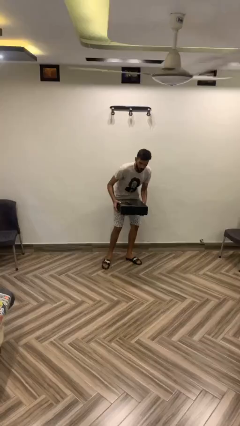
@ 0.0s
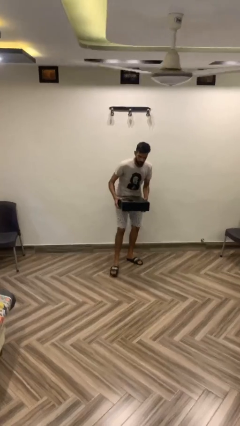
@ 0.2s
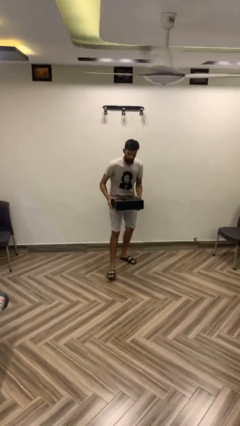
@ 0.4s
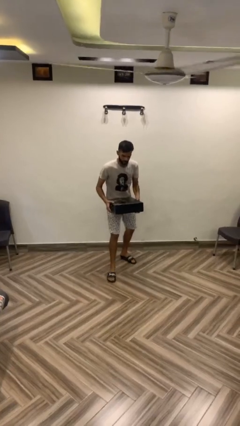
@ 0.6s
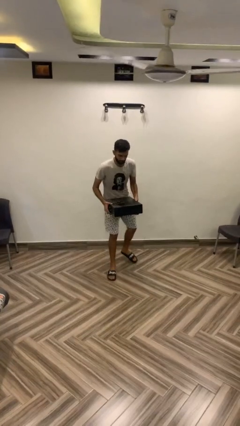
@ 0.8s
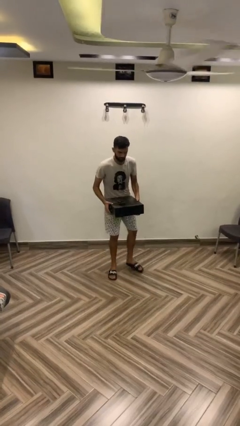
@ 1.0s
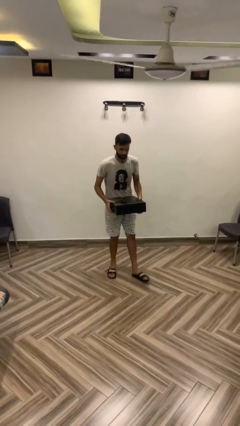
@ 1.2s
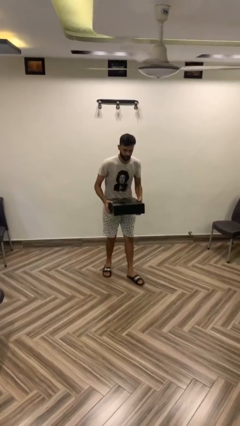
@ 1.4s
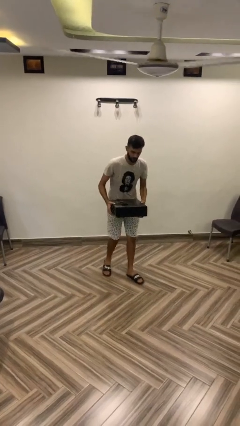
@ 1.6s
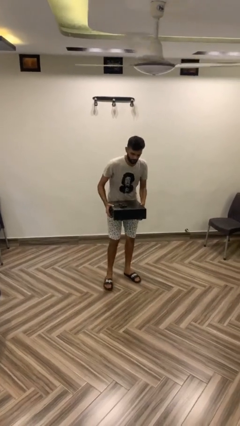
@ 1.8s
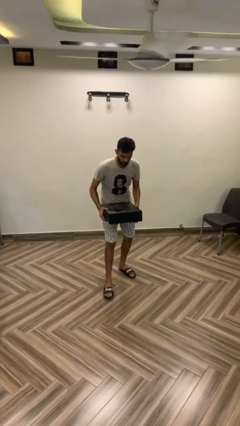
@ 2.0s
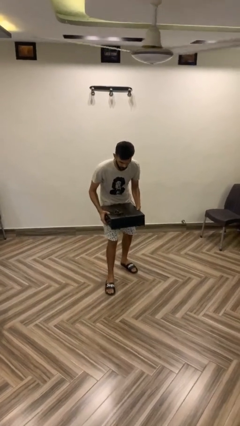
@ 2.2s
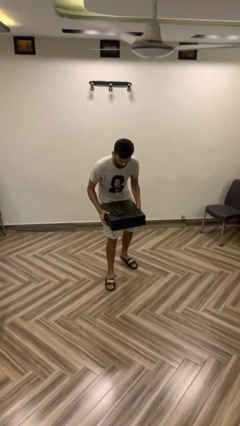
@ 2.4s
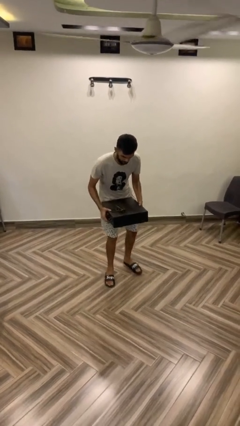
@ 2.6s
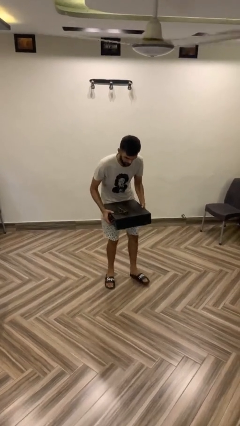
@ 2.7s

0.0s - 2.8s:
person carries heavy object

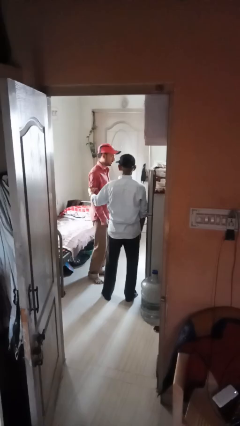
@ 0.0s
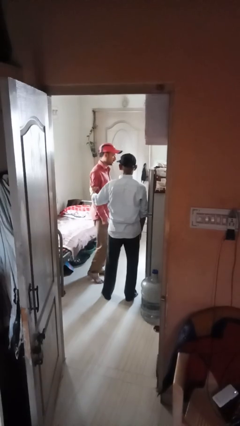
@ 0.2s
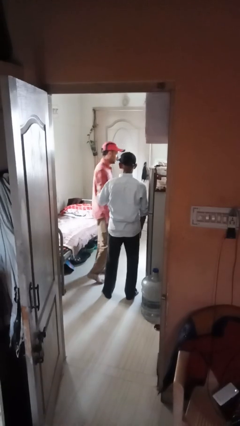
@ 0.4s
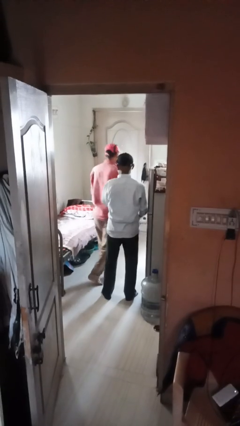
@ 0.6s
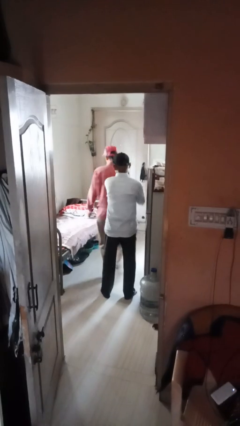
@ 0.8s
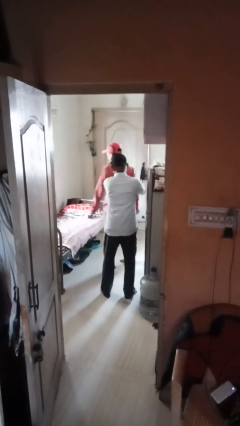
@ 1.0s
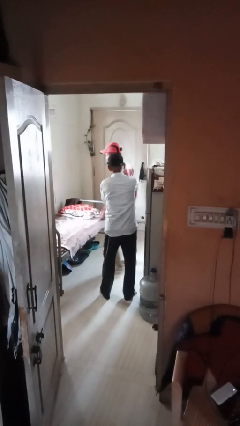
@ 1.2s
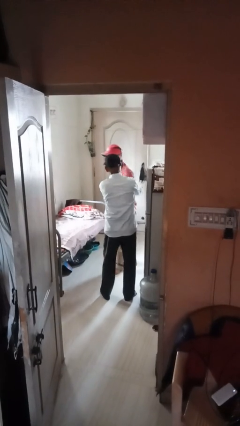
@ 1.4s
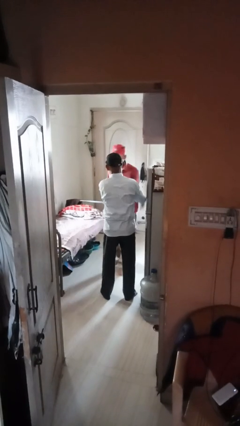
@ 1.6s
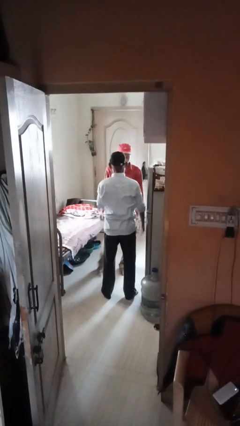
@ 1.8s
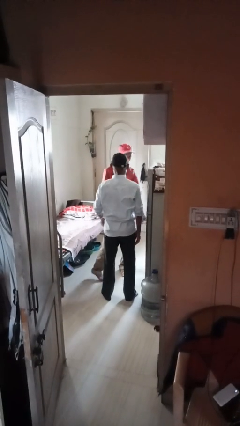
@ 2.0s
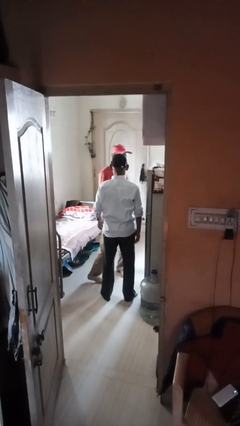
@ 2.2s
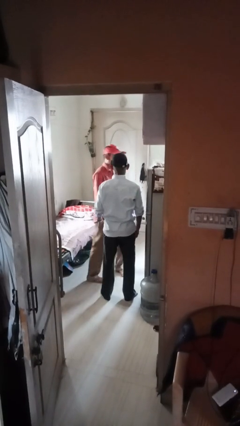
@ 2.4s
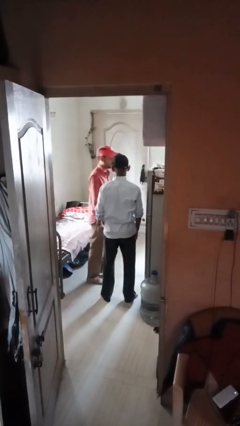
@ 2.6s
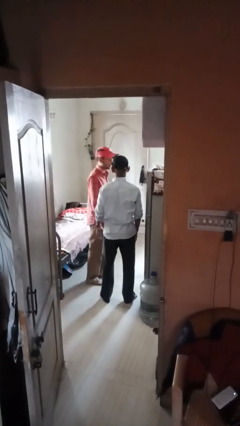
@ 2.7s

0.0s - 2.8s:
person spins person around

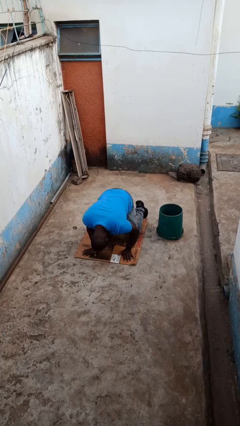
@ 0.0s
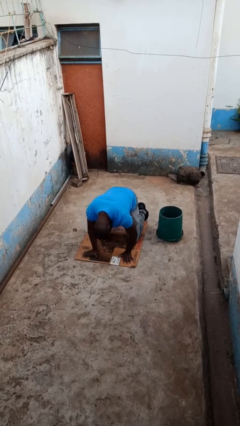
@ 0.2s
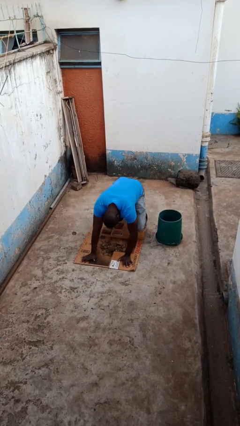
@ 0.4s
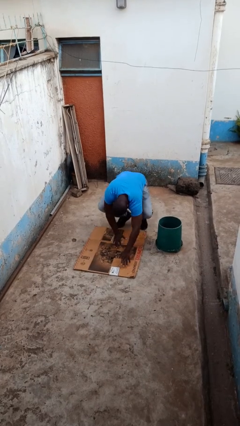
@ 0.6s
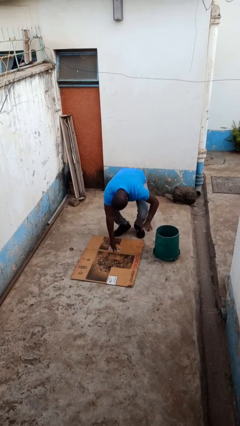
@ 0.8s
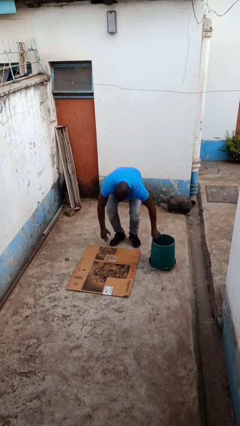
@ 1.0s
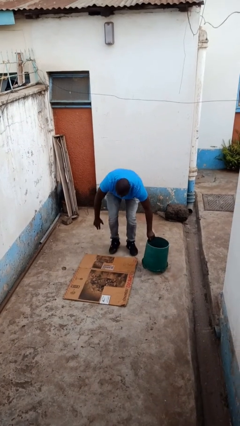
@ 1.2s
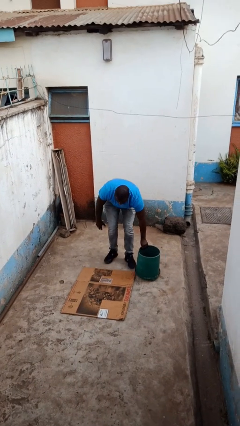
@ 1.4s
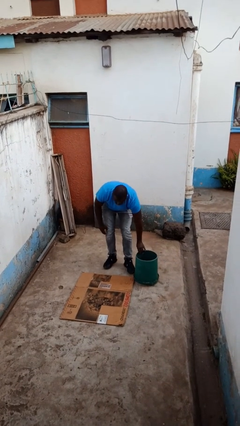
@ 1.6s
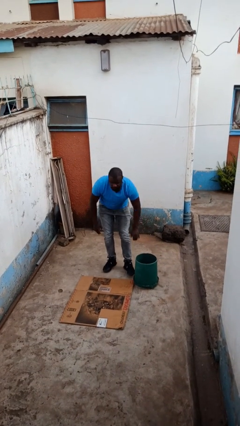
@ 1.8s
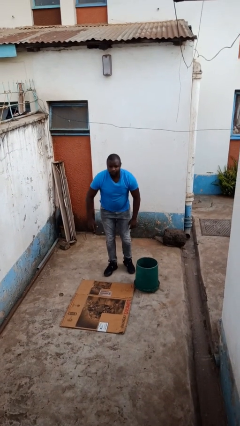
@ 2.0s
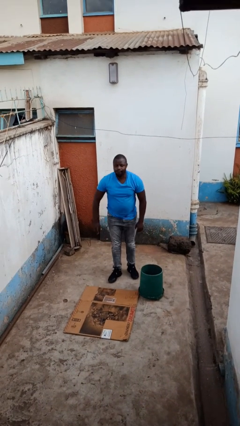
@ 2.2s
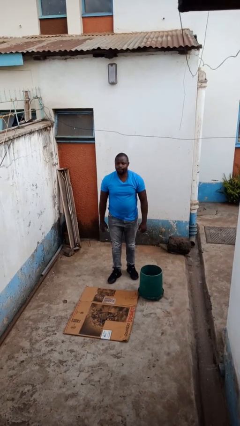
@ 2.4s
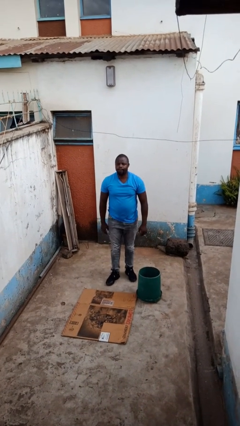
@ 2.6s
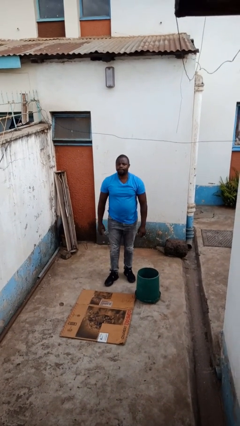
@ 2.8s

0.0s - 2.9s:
person stands up from floor

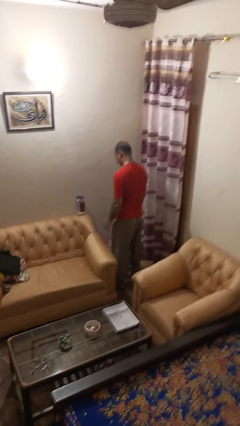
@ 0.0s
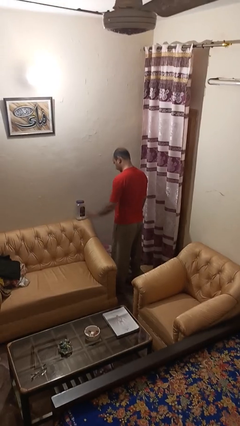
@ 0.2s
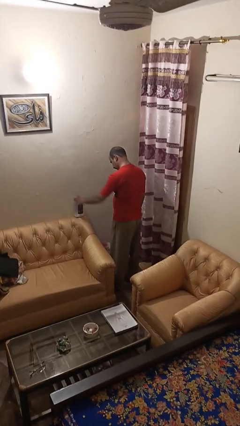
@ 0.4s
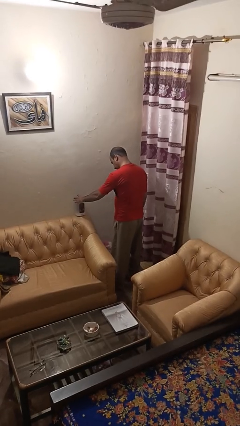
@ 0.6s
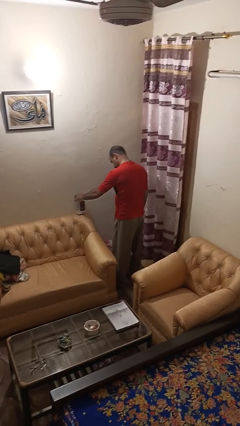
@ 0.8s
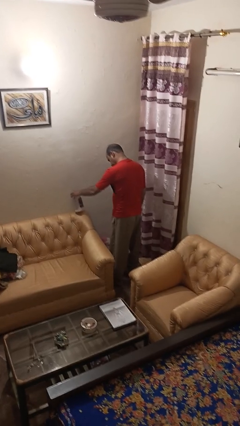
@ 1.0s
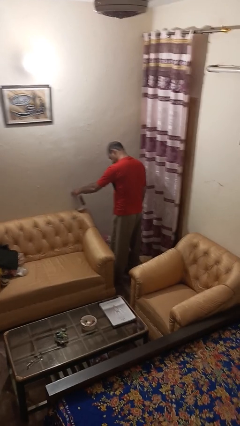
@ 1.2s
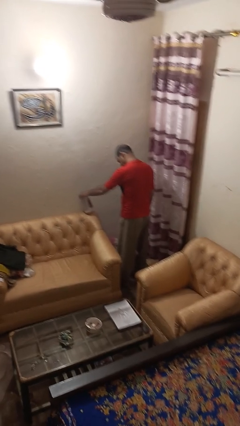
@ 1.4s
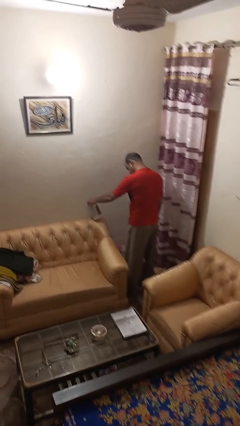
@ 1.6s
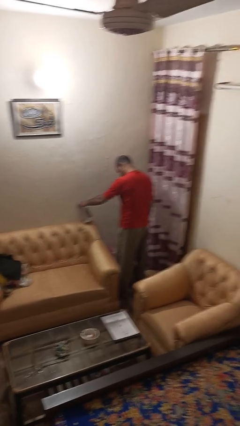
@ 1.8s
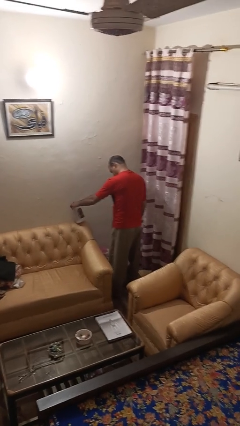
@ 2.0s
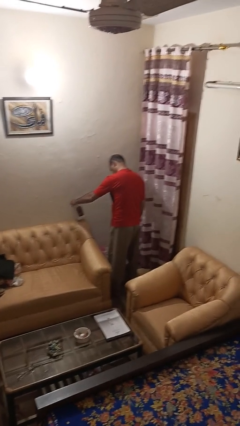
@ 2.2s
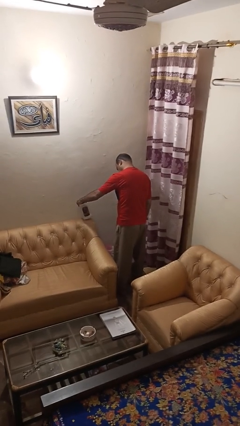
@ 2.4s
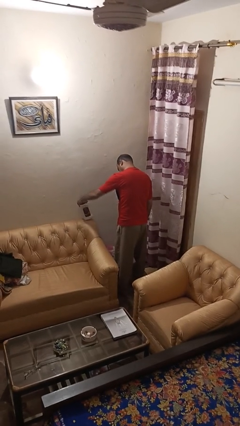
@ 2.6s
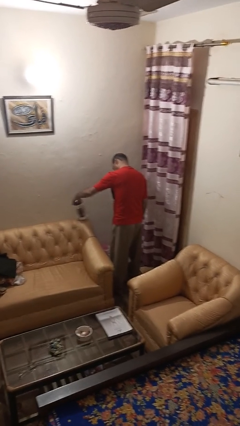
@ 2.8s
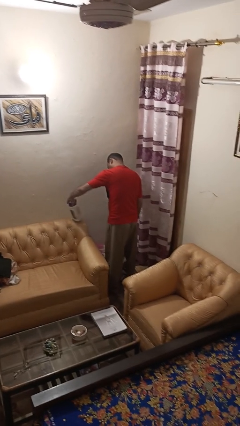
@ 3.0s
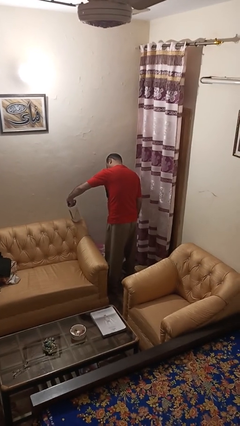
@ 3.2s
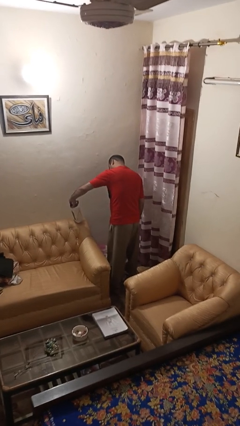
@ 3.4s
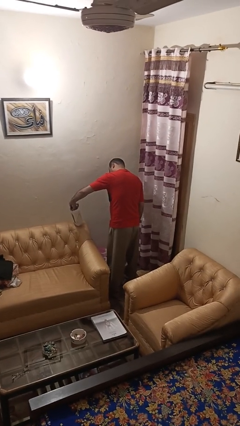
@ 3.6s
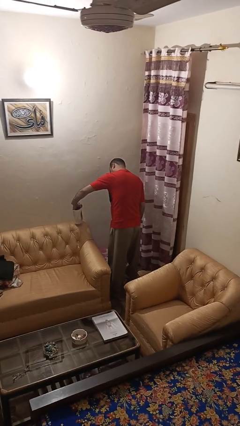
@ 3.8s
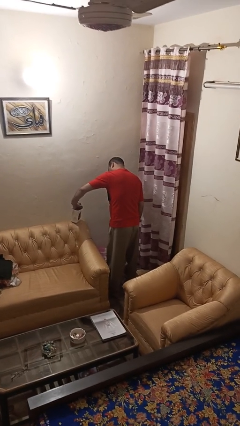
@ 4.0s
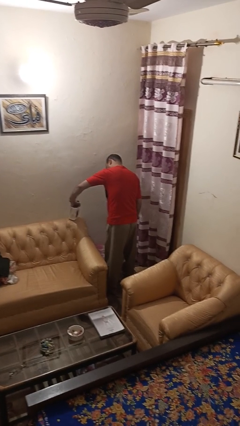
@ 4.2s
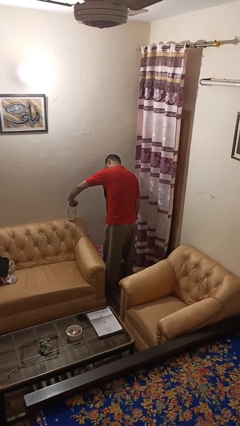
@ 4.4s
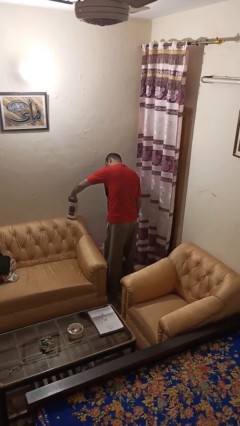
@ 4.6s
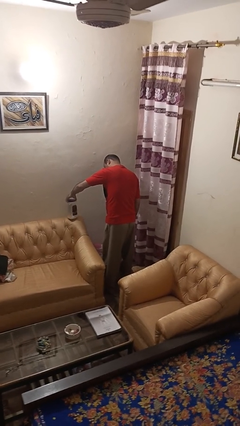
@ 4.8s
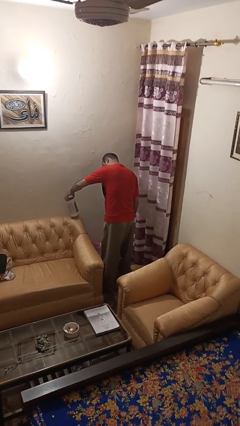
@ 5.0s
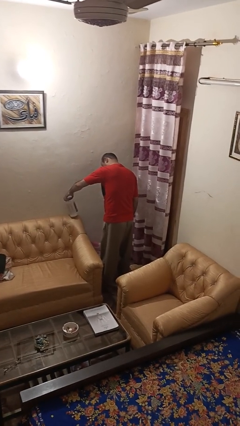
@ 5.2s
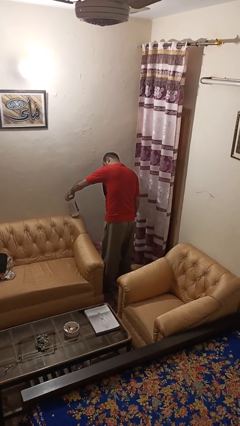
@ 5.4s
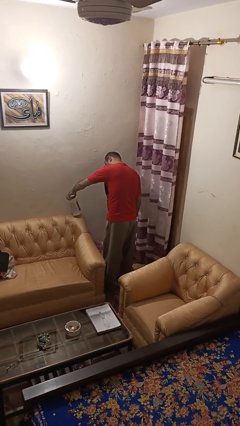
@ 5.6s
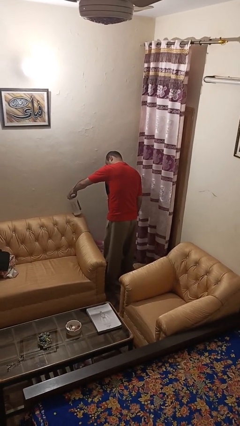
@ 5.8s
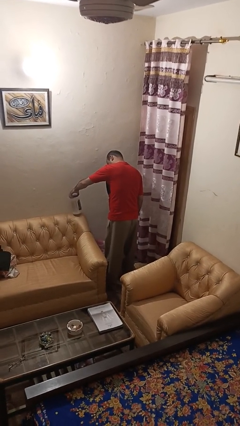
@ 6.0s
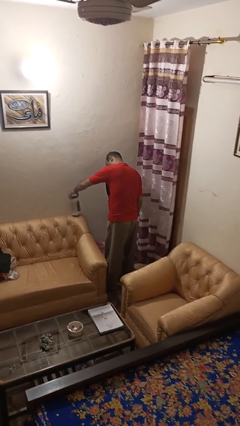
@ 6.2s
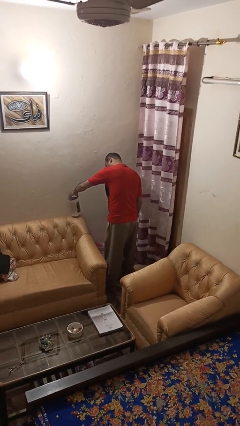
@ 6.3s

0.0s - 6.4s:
person taps object with finger

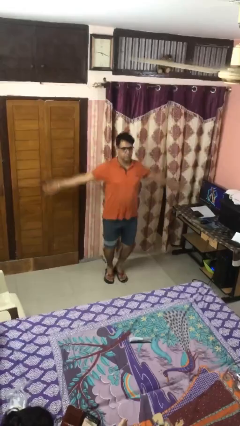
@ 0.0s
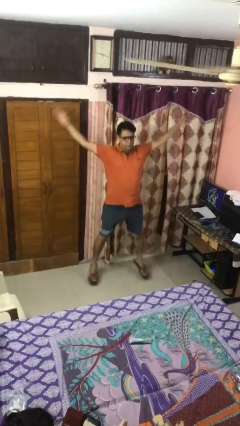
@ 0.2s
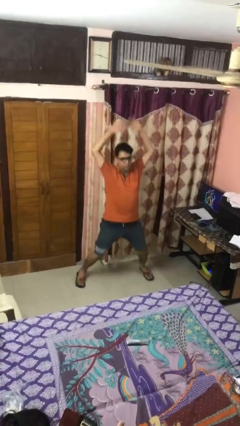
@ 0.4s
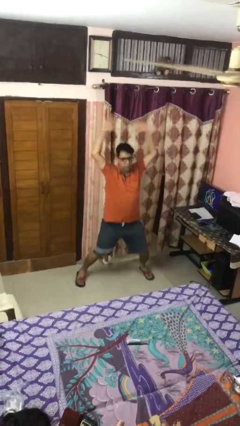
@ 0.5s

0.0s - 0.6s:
person exercises with jumping jacks

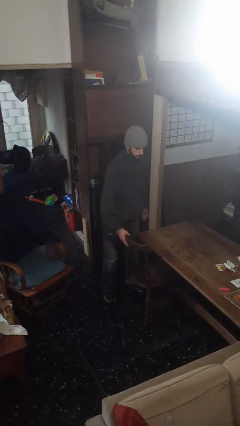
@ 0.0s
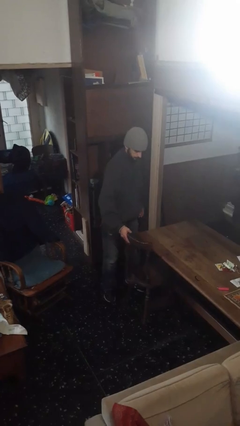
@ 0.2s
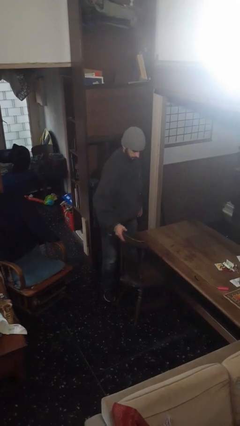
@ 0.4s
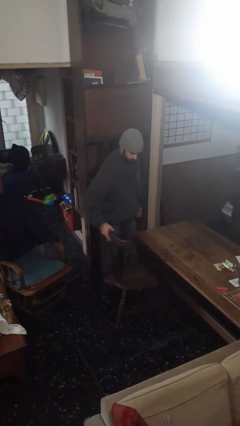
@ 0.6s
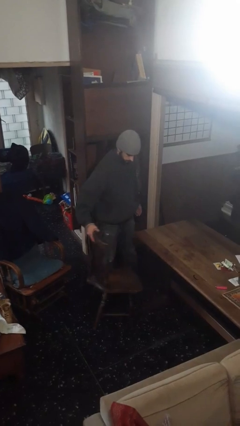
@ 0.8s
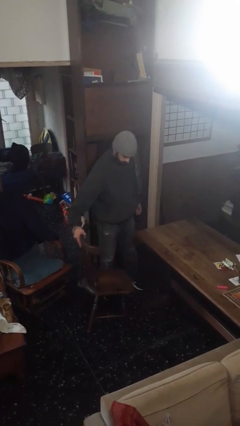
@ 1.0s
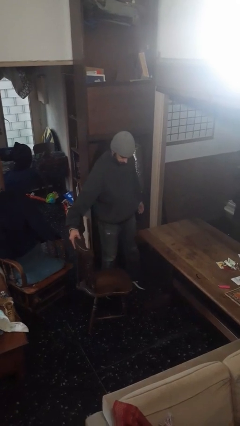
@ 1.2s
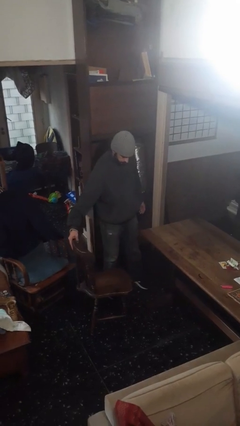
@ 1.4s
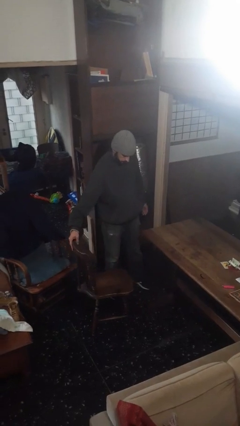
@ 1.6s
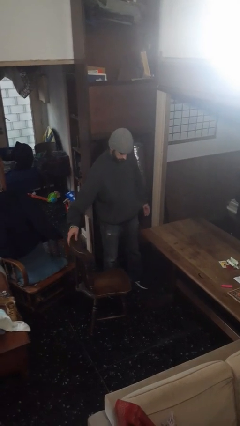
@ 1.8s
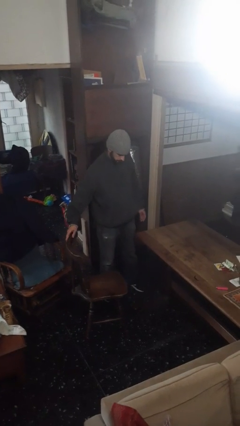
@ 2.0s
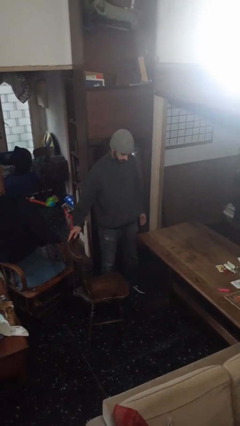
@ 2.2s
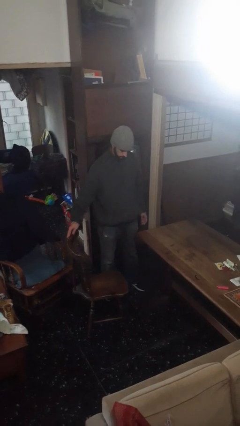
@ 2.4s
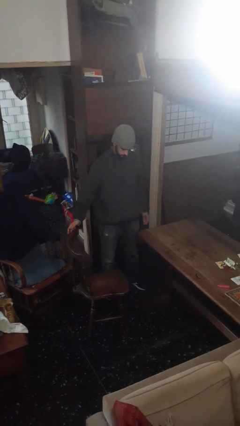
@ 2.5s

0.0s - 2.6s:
person pulls out chair
